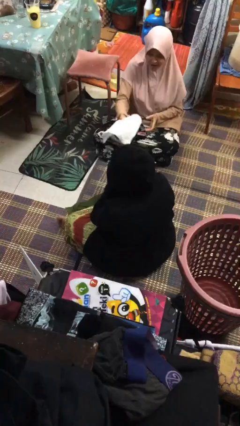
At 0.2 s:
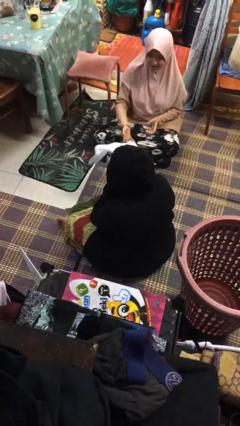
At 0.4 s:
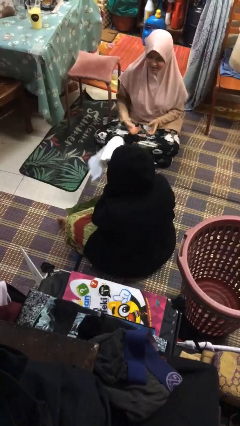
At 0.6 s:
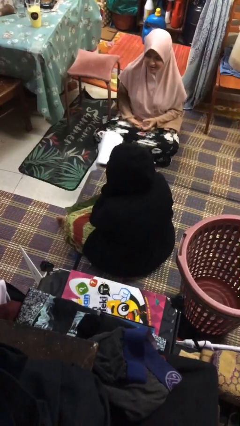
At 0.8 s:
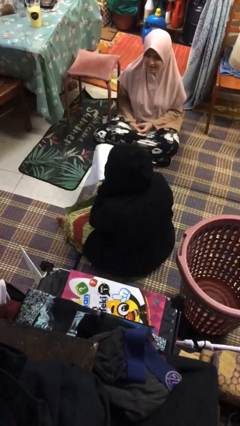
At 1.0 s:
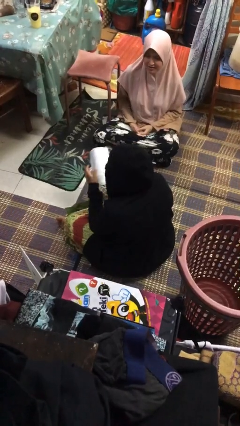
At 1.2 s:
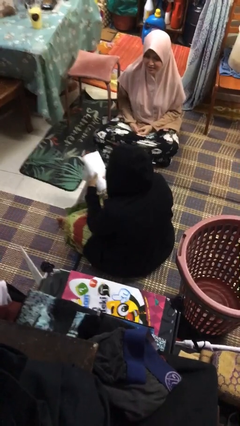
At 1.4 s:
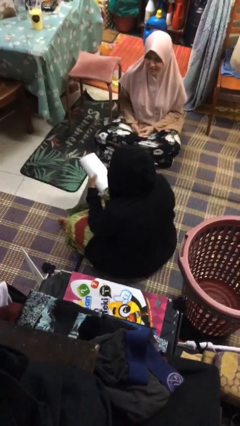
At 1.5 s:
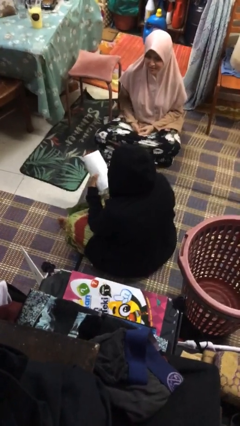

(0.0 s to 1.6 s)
person catches object from person

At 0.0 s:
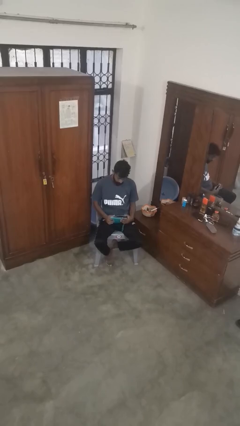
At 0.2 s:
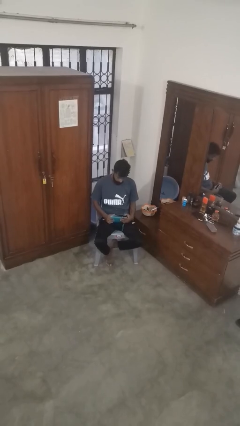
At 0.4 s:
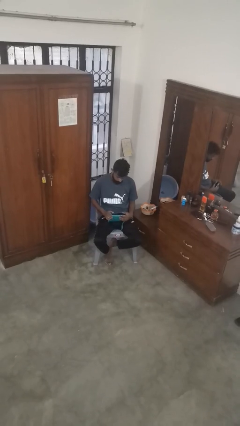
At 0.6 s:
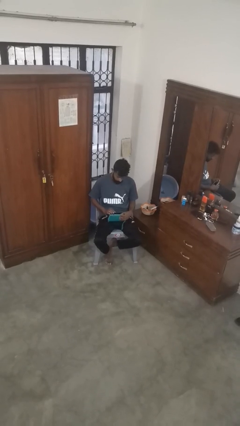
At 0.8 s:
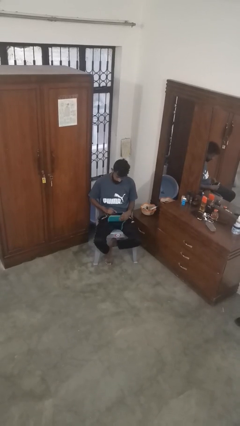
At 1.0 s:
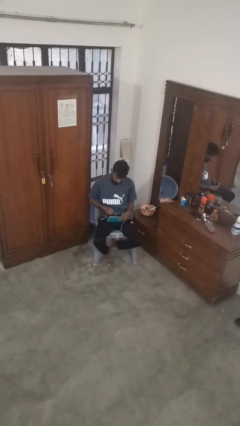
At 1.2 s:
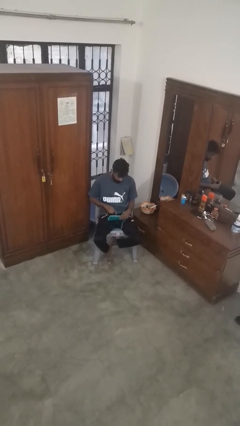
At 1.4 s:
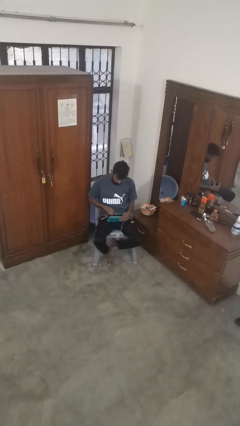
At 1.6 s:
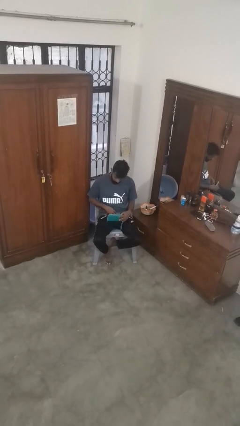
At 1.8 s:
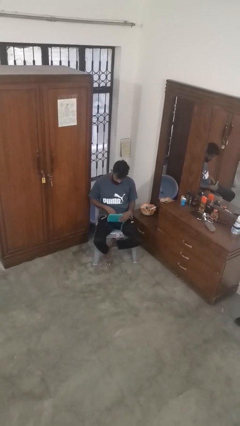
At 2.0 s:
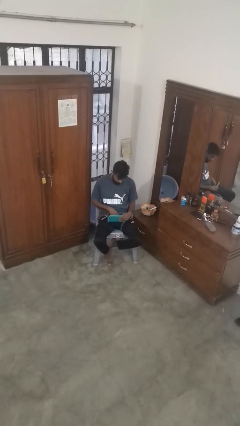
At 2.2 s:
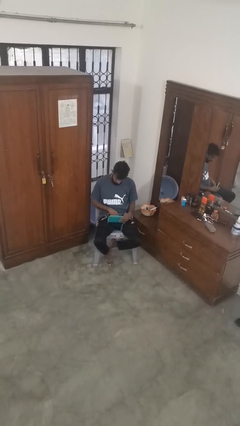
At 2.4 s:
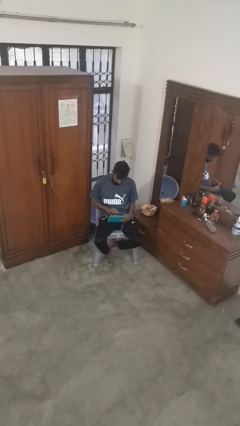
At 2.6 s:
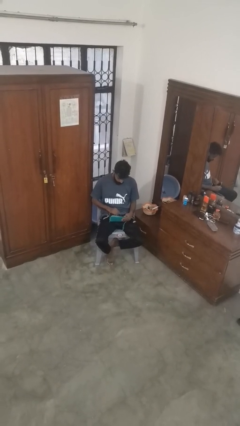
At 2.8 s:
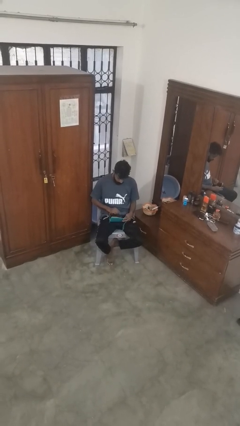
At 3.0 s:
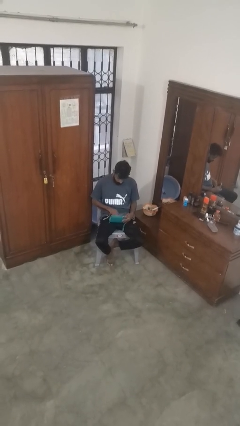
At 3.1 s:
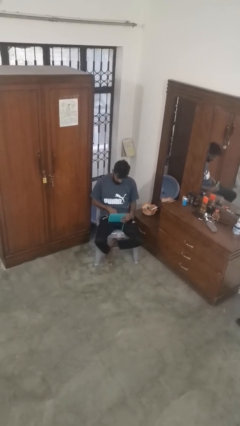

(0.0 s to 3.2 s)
person searches in purse

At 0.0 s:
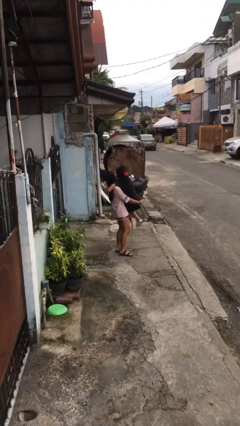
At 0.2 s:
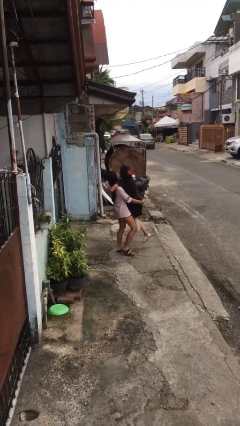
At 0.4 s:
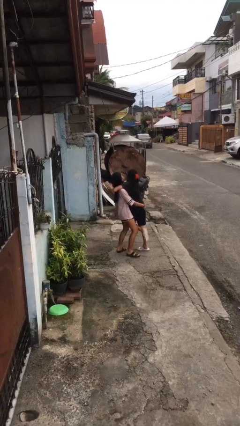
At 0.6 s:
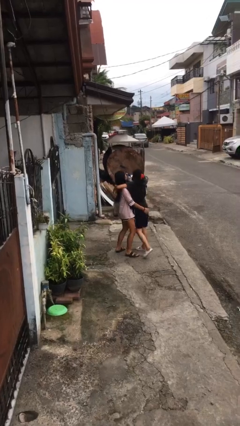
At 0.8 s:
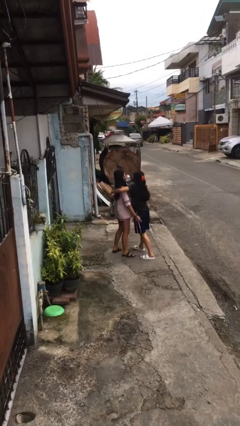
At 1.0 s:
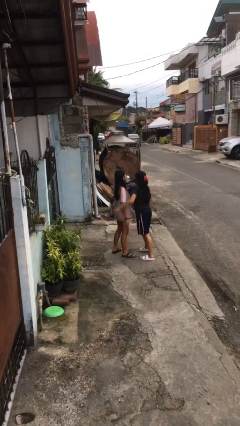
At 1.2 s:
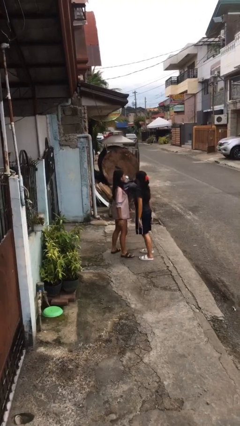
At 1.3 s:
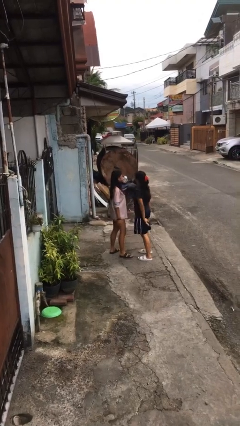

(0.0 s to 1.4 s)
person puts down person

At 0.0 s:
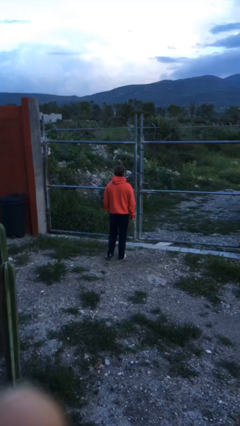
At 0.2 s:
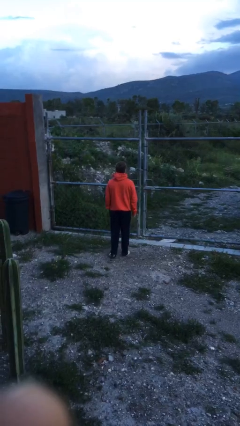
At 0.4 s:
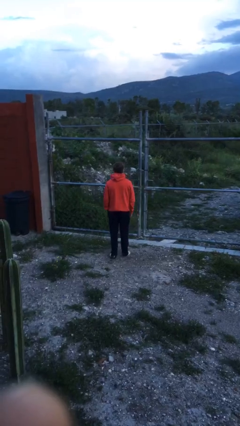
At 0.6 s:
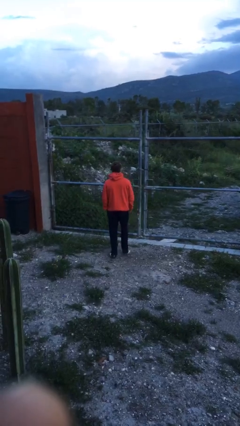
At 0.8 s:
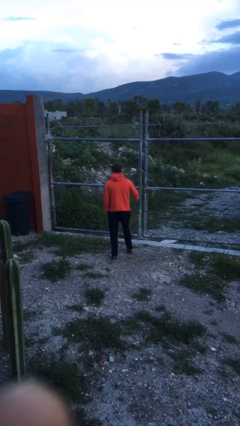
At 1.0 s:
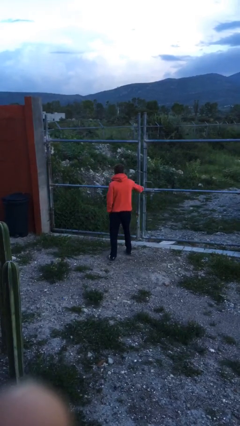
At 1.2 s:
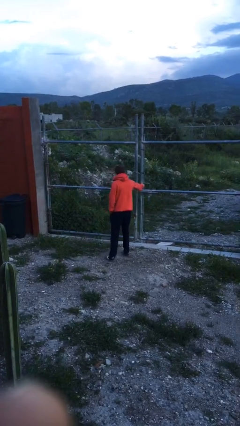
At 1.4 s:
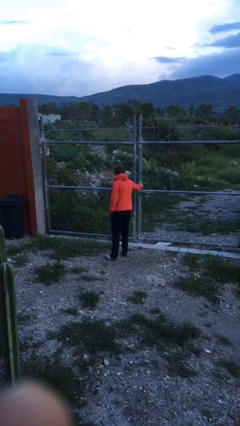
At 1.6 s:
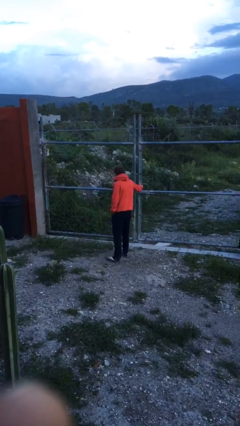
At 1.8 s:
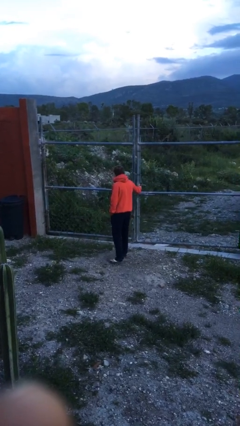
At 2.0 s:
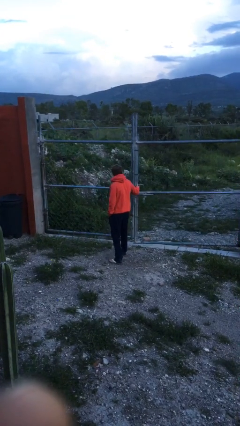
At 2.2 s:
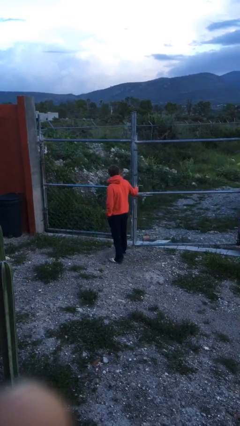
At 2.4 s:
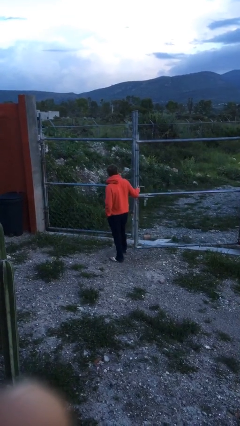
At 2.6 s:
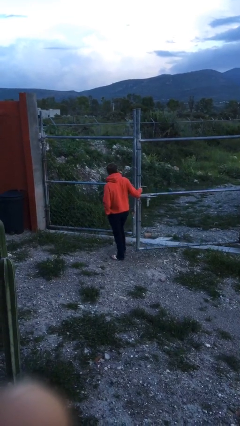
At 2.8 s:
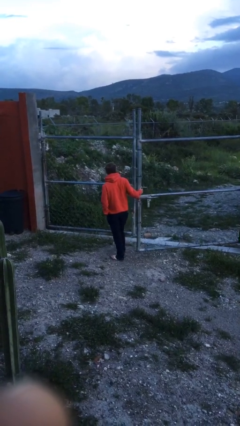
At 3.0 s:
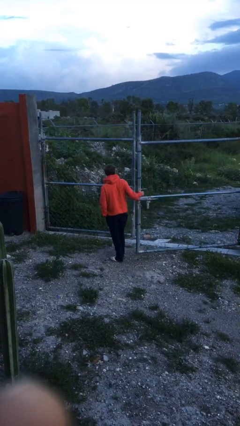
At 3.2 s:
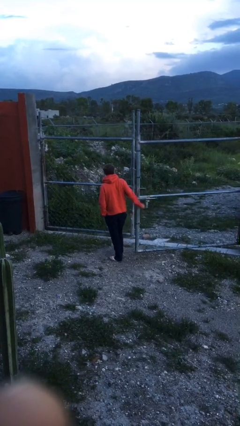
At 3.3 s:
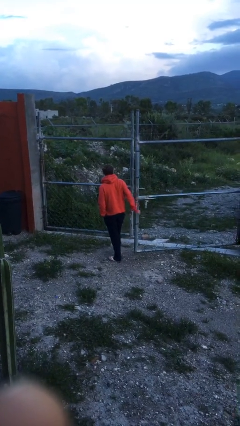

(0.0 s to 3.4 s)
person opens gate

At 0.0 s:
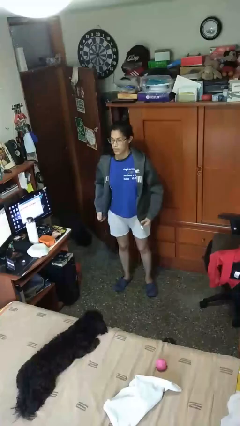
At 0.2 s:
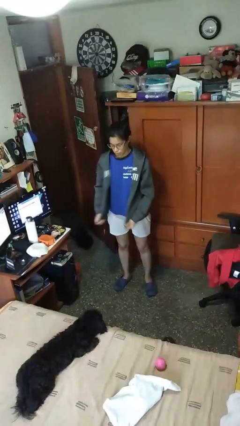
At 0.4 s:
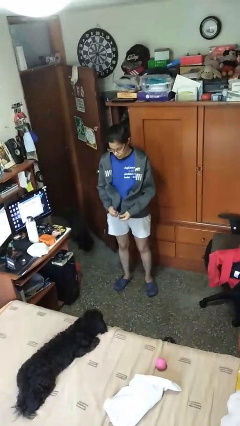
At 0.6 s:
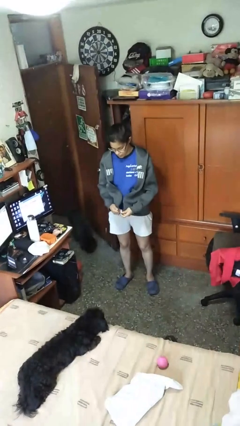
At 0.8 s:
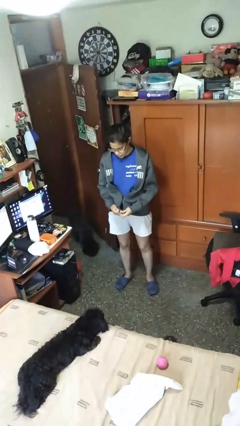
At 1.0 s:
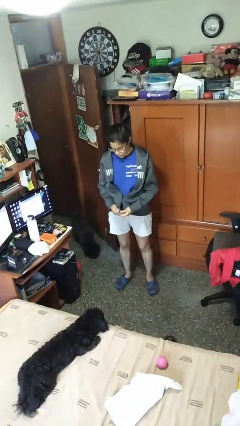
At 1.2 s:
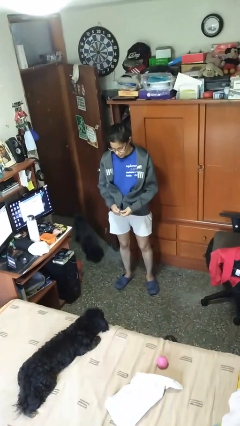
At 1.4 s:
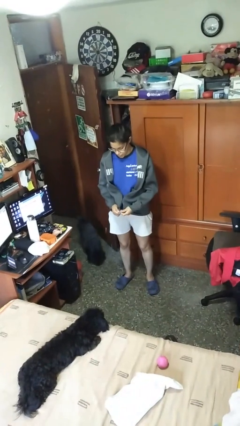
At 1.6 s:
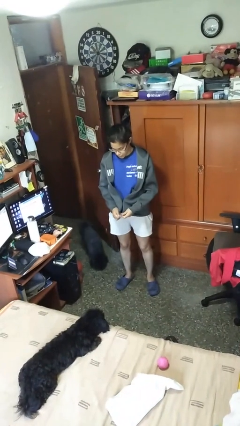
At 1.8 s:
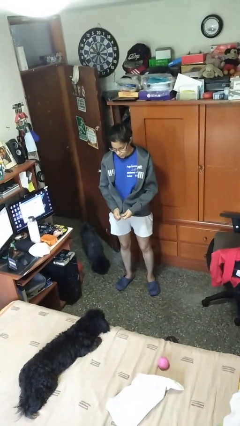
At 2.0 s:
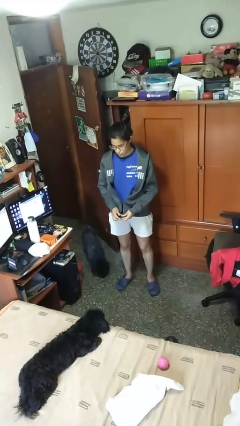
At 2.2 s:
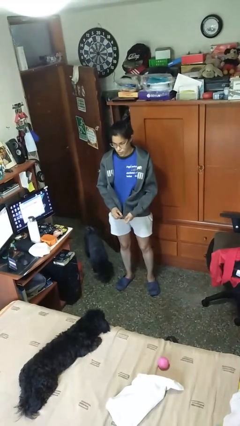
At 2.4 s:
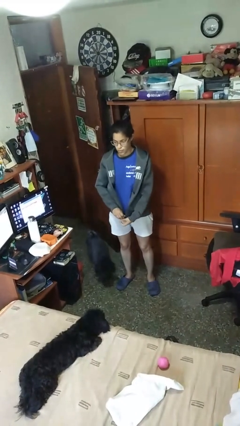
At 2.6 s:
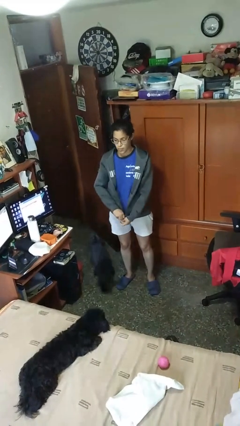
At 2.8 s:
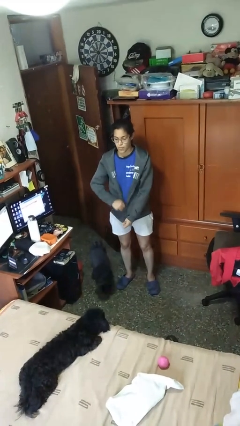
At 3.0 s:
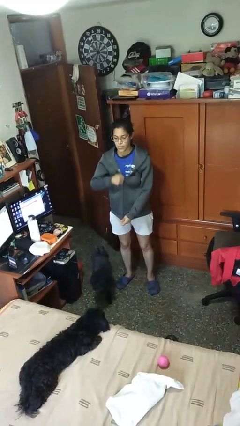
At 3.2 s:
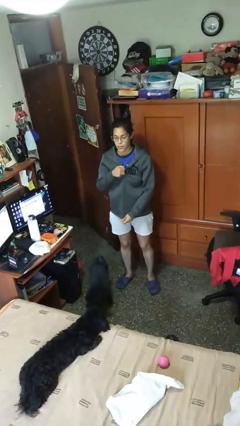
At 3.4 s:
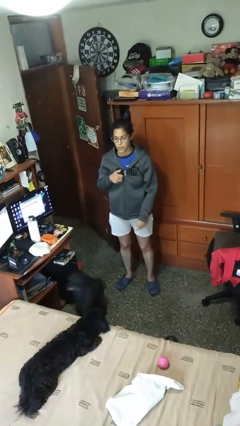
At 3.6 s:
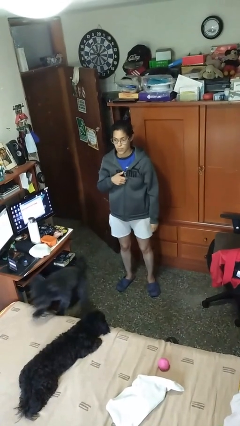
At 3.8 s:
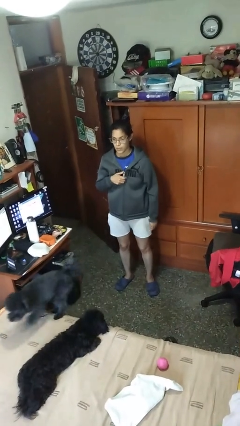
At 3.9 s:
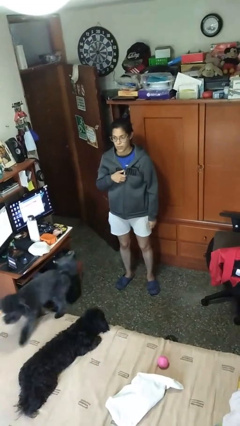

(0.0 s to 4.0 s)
person zips up jacket

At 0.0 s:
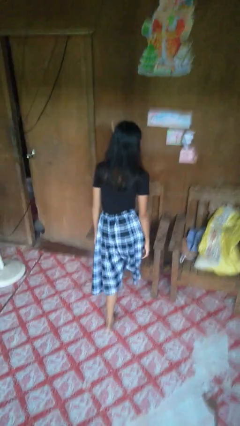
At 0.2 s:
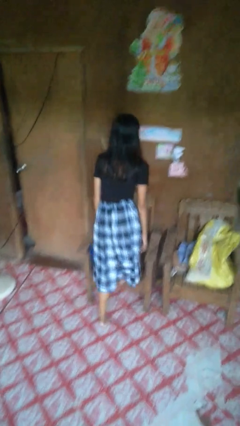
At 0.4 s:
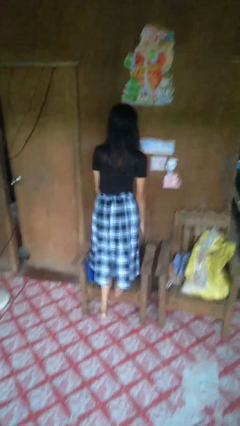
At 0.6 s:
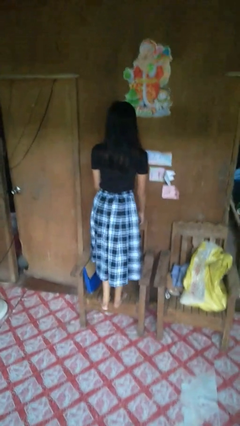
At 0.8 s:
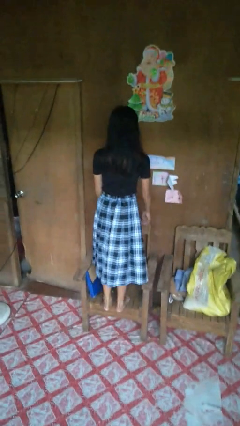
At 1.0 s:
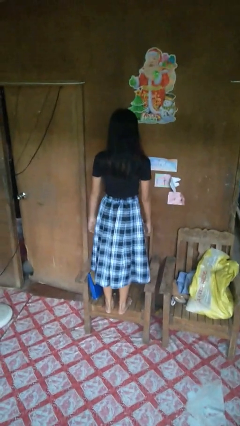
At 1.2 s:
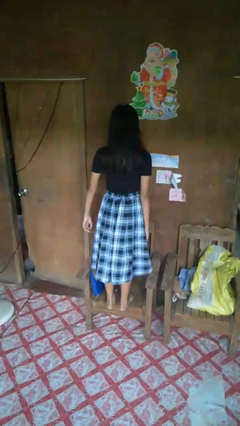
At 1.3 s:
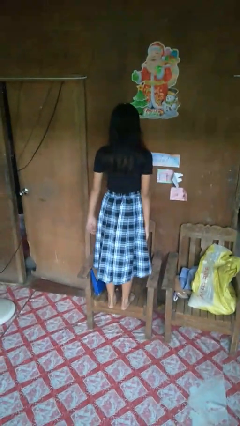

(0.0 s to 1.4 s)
person climbs on chair

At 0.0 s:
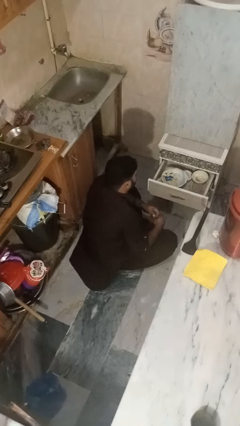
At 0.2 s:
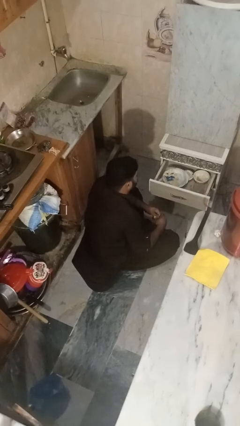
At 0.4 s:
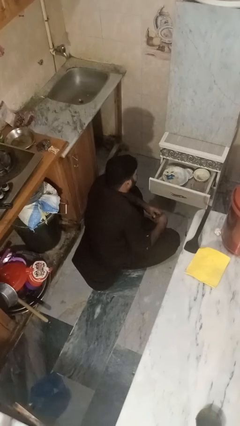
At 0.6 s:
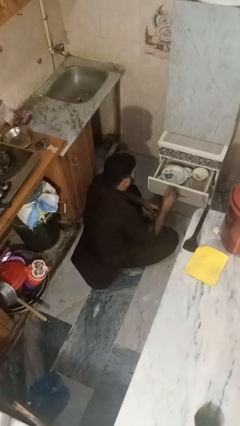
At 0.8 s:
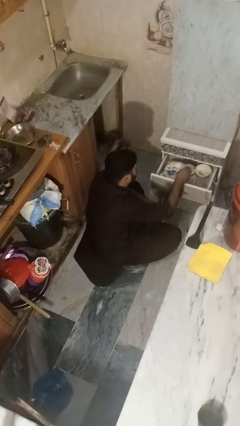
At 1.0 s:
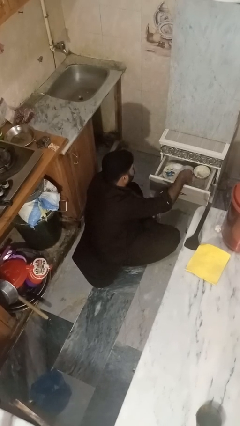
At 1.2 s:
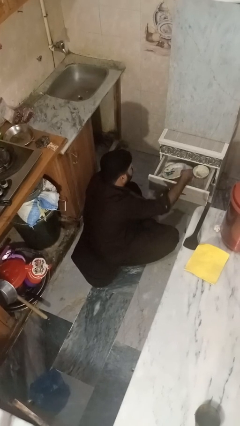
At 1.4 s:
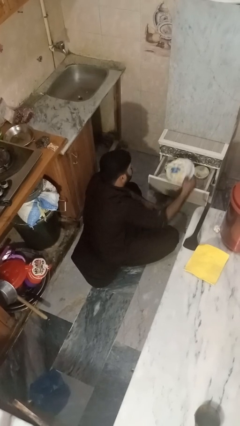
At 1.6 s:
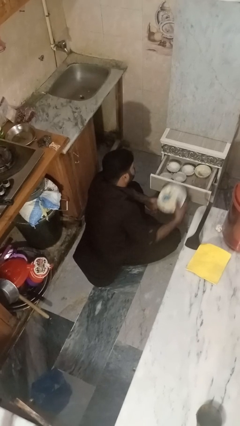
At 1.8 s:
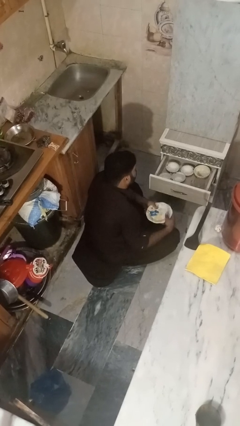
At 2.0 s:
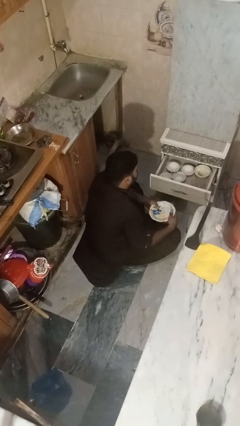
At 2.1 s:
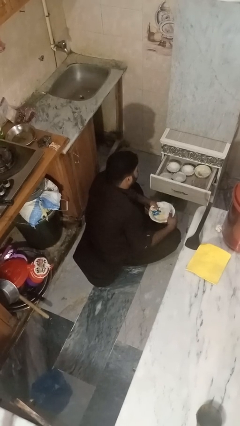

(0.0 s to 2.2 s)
person takes object from kitchen drawer
